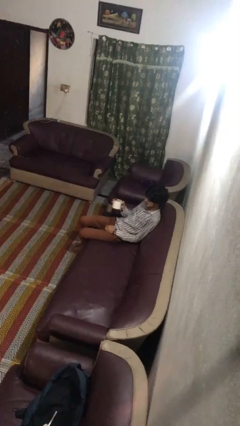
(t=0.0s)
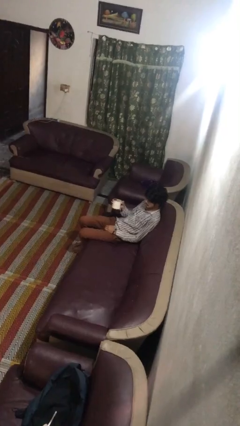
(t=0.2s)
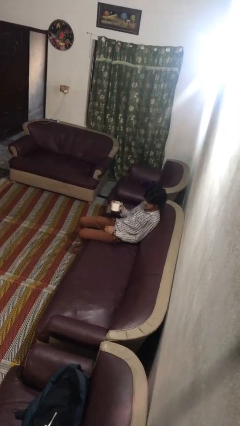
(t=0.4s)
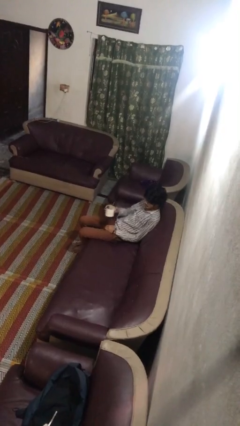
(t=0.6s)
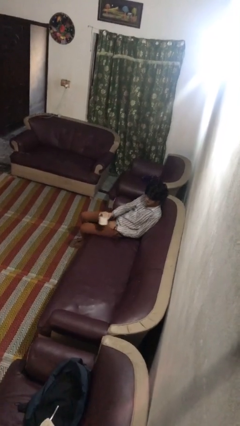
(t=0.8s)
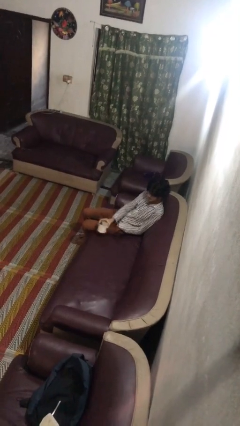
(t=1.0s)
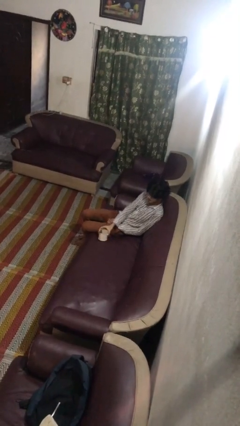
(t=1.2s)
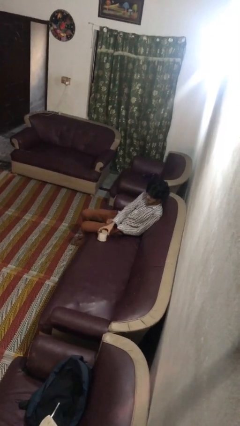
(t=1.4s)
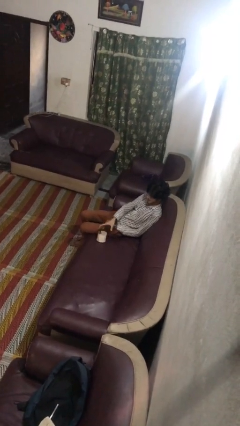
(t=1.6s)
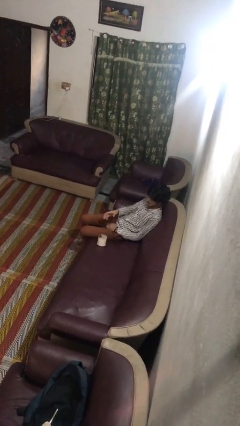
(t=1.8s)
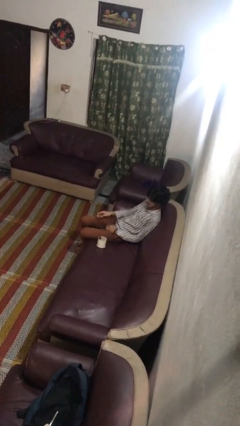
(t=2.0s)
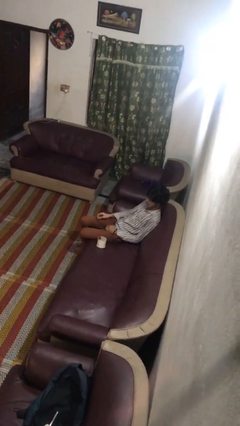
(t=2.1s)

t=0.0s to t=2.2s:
person puts down object on couch

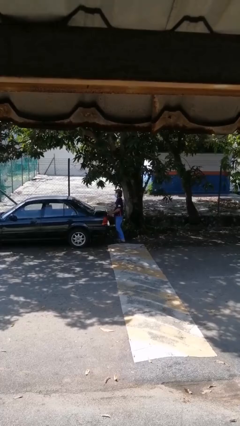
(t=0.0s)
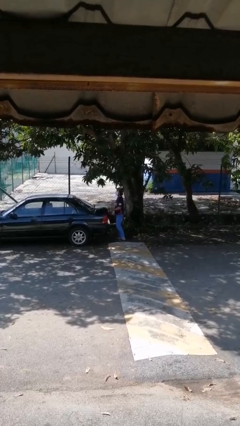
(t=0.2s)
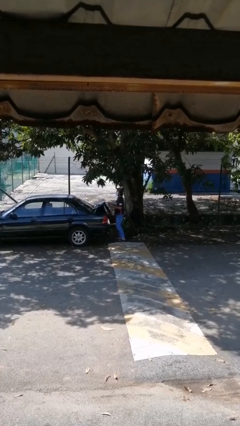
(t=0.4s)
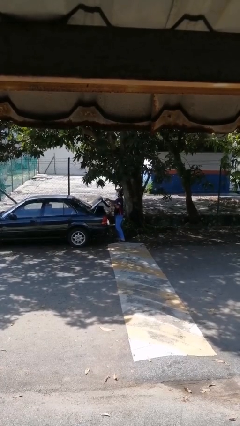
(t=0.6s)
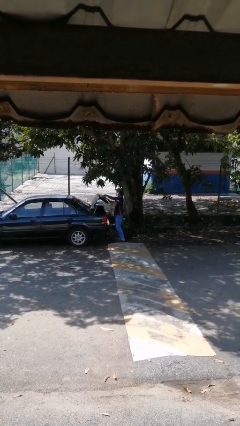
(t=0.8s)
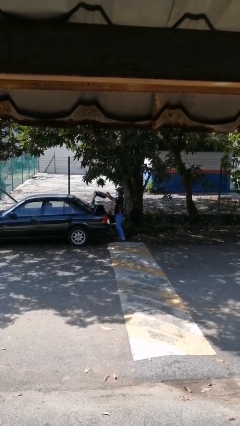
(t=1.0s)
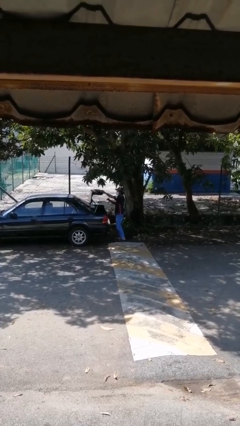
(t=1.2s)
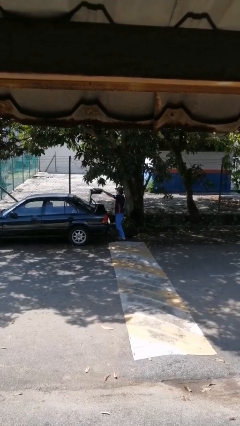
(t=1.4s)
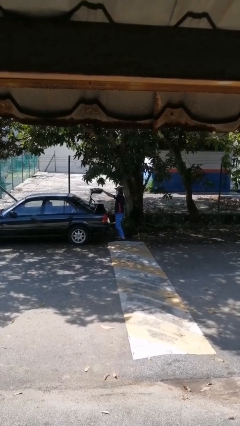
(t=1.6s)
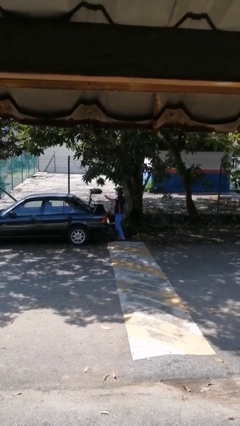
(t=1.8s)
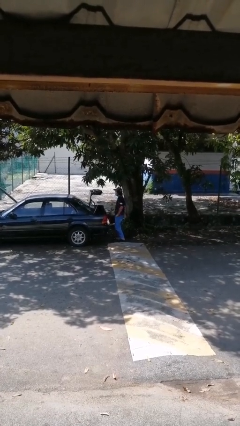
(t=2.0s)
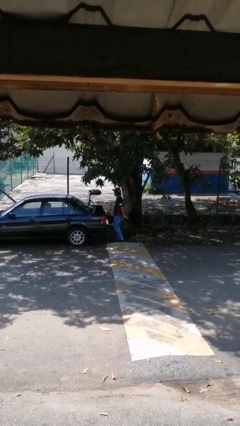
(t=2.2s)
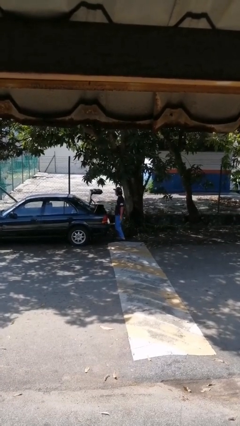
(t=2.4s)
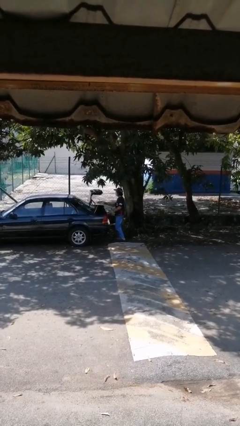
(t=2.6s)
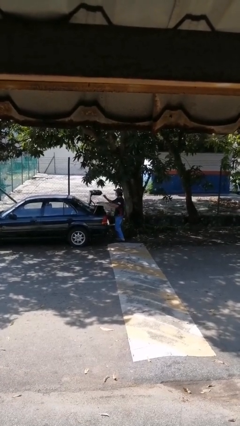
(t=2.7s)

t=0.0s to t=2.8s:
person opens car trunk

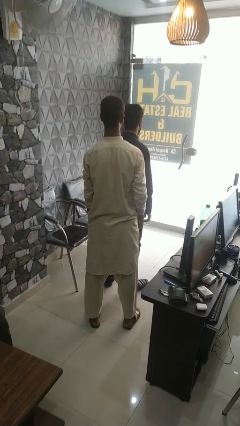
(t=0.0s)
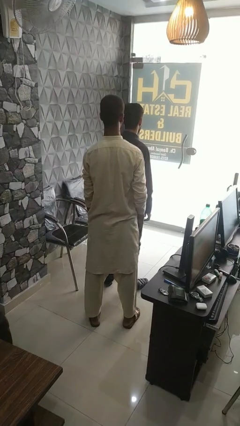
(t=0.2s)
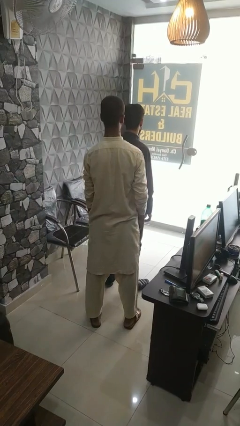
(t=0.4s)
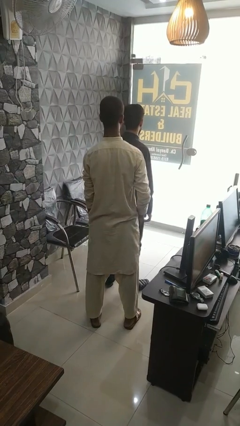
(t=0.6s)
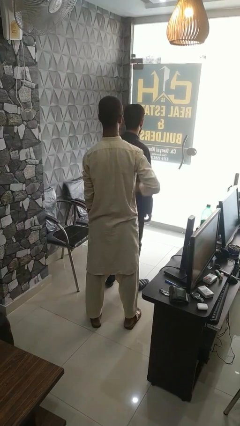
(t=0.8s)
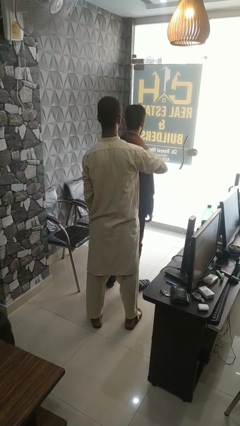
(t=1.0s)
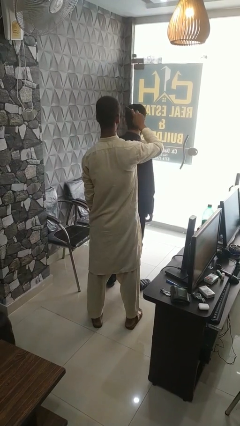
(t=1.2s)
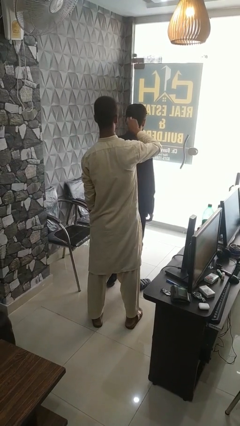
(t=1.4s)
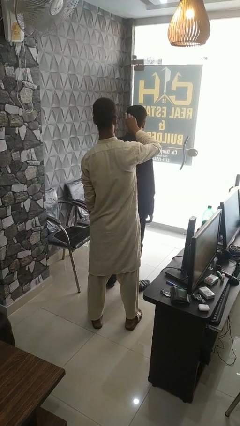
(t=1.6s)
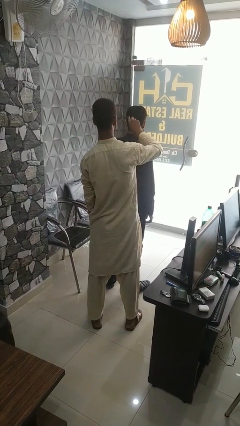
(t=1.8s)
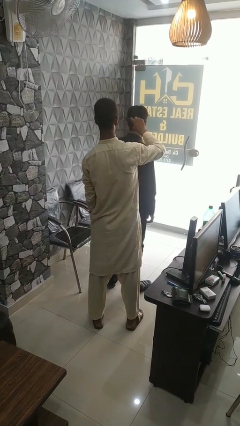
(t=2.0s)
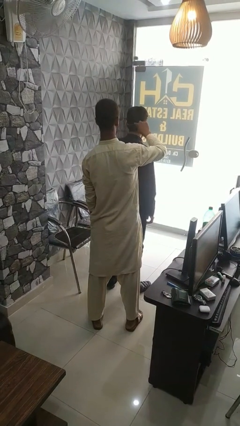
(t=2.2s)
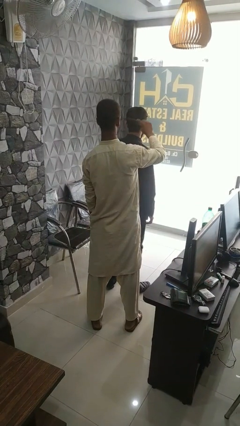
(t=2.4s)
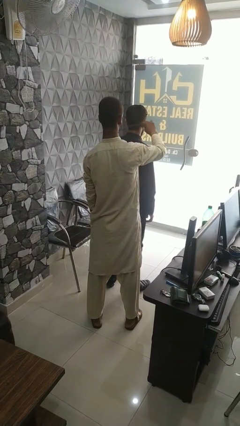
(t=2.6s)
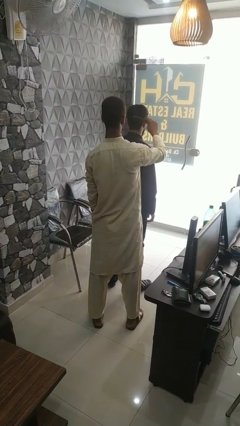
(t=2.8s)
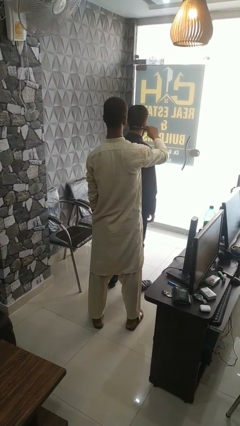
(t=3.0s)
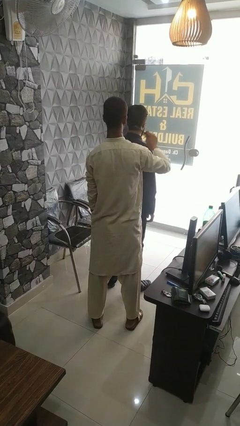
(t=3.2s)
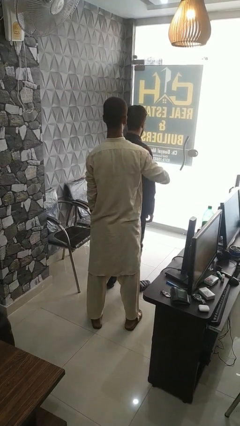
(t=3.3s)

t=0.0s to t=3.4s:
person brushes hair of person

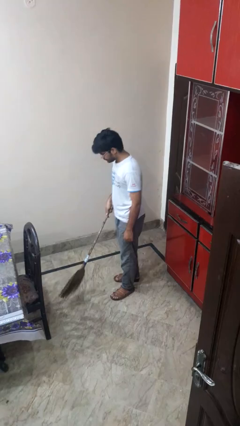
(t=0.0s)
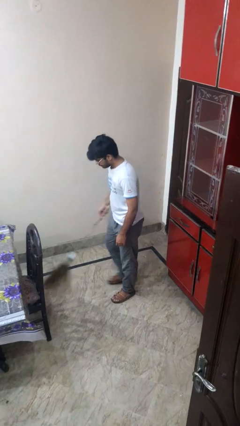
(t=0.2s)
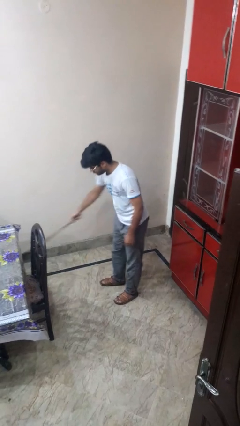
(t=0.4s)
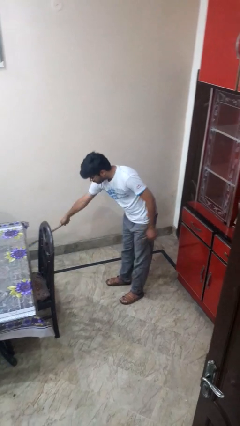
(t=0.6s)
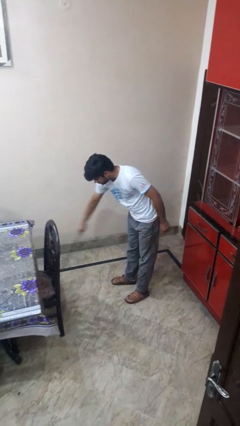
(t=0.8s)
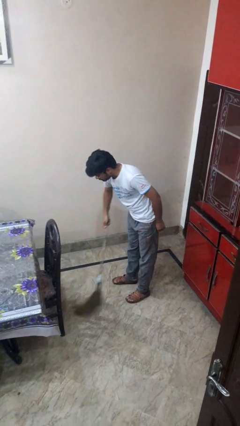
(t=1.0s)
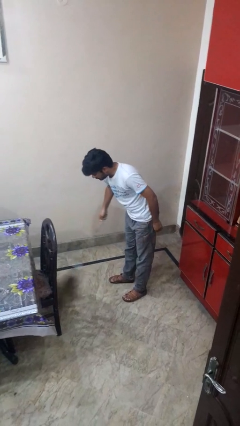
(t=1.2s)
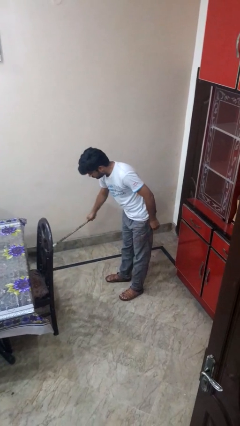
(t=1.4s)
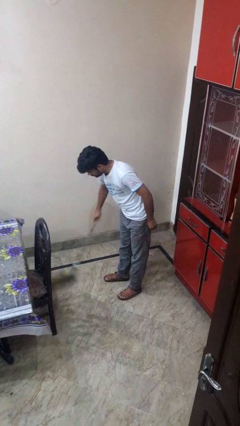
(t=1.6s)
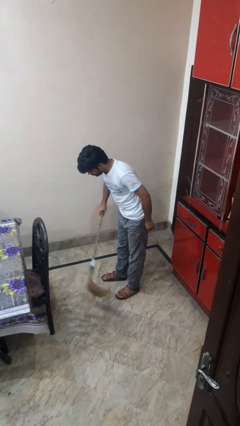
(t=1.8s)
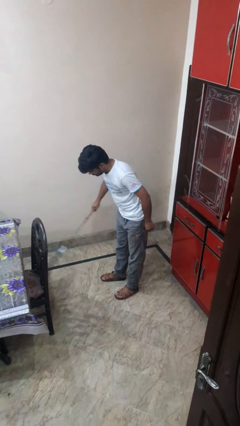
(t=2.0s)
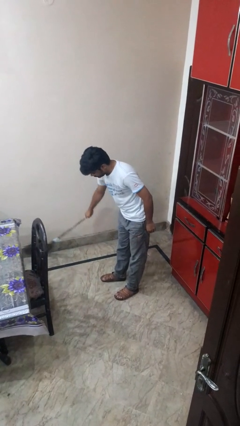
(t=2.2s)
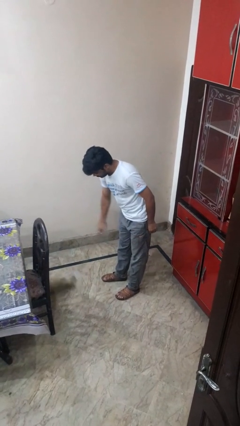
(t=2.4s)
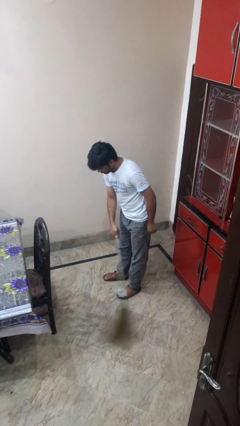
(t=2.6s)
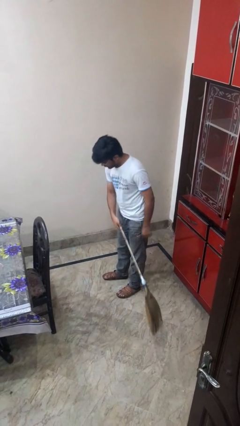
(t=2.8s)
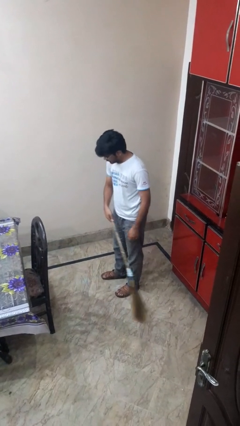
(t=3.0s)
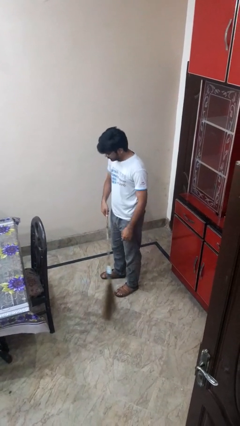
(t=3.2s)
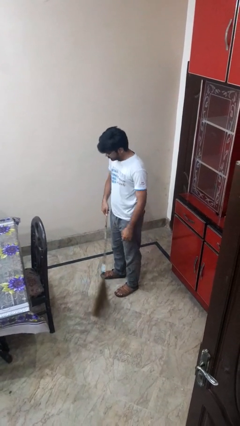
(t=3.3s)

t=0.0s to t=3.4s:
person sweeps floor

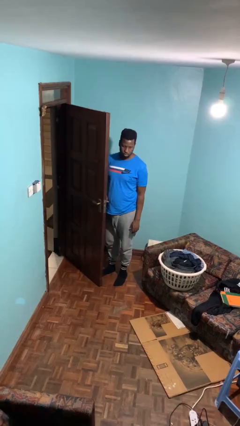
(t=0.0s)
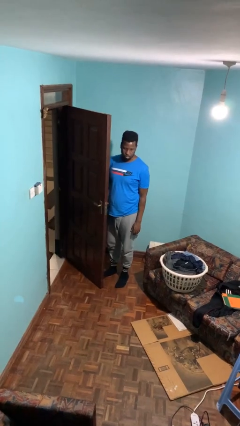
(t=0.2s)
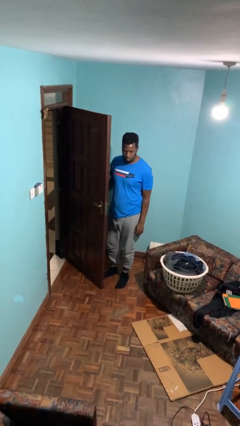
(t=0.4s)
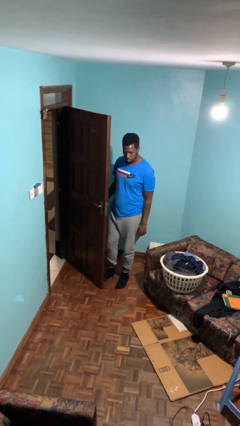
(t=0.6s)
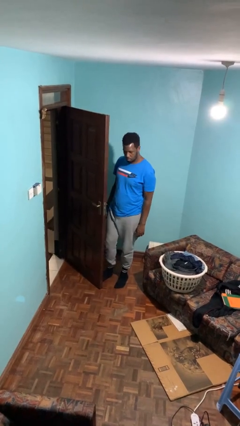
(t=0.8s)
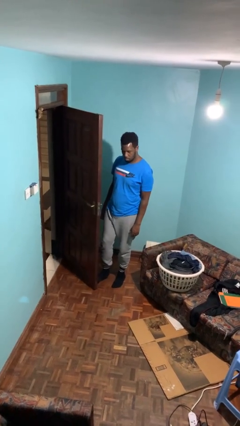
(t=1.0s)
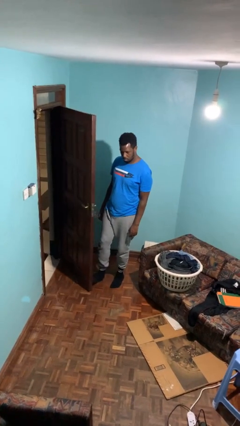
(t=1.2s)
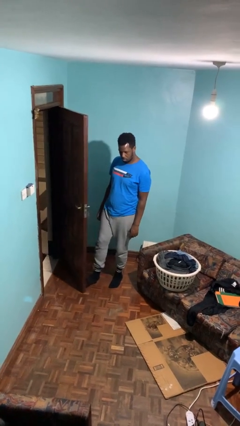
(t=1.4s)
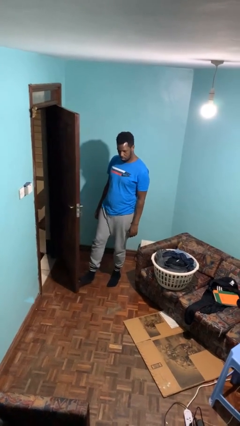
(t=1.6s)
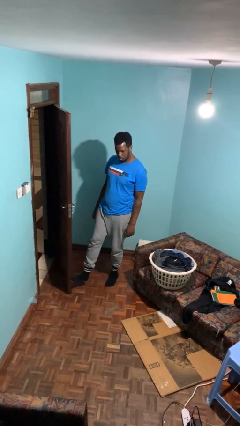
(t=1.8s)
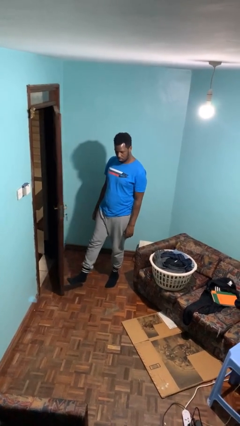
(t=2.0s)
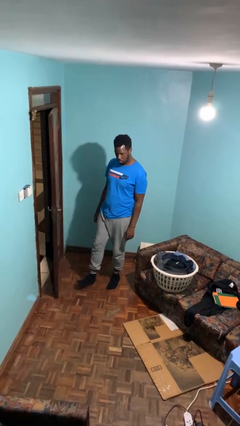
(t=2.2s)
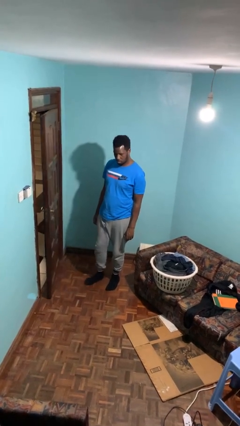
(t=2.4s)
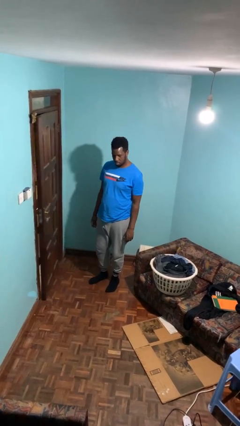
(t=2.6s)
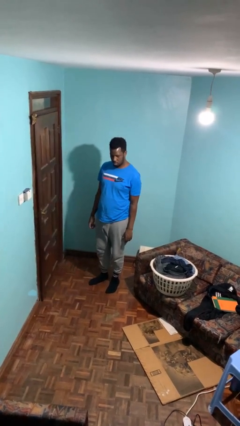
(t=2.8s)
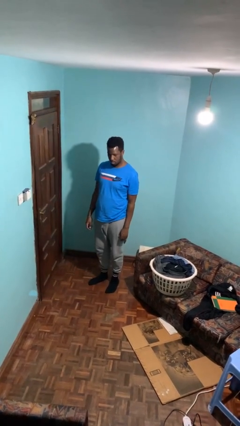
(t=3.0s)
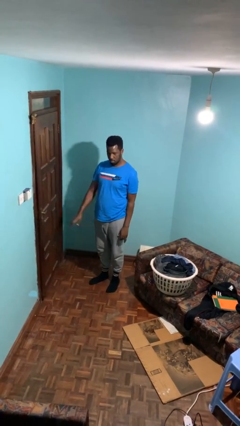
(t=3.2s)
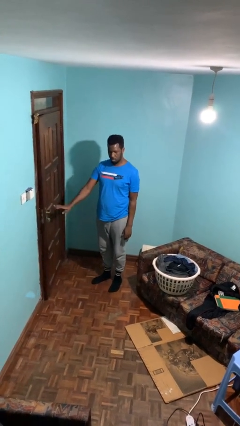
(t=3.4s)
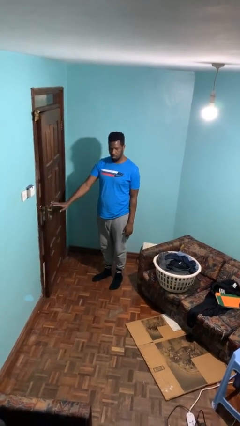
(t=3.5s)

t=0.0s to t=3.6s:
person closes door with foot

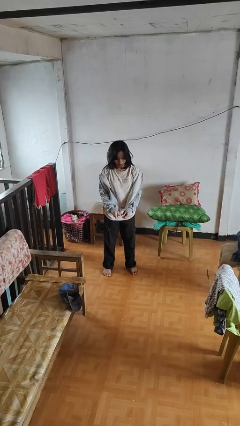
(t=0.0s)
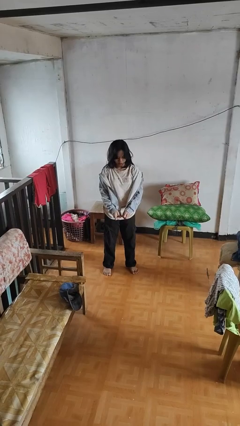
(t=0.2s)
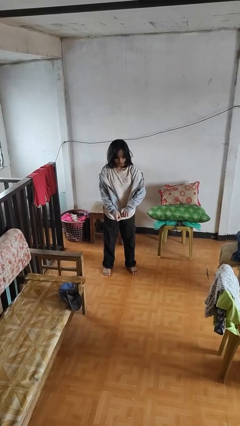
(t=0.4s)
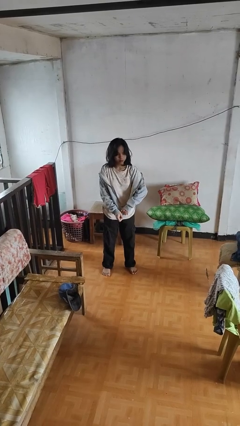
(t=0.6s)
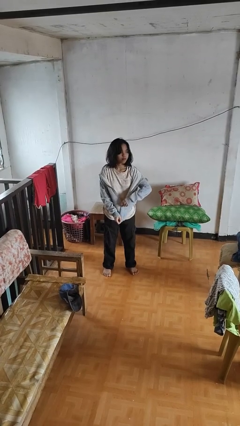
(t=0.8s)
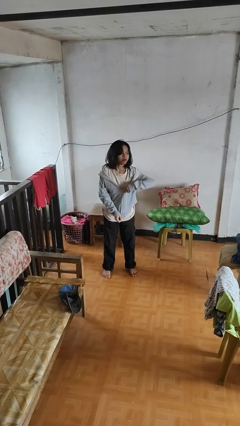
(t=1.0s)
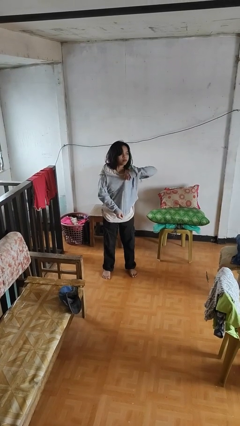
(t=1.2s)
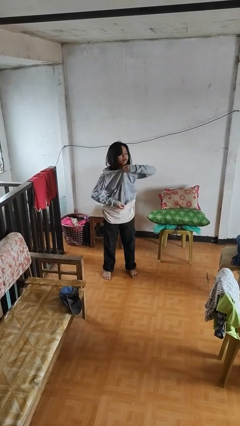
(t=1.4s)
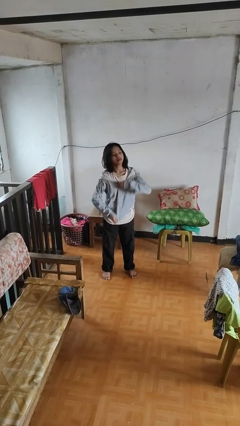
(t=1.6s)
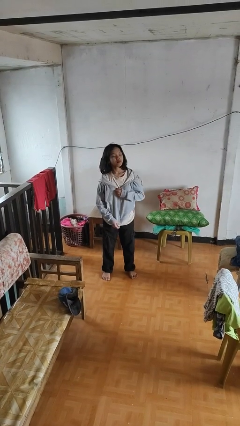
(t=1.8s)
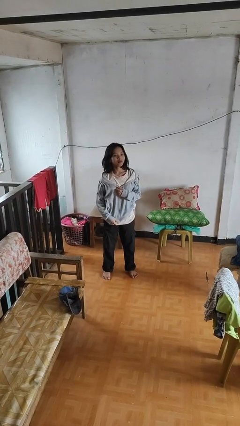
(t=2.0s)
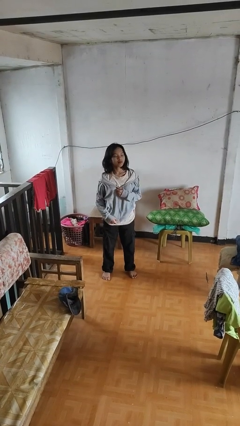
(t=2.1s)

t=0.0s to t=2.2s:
person zips up jacket
